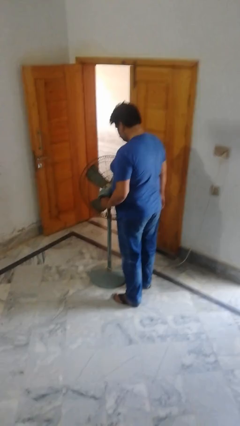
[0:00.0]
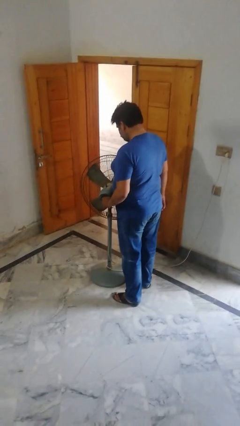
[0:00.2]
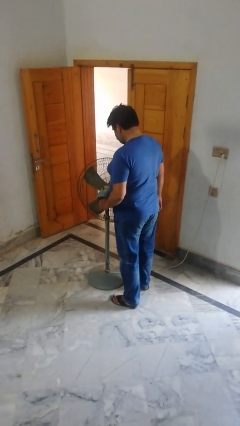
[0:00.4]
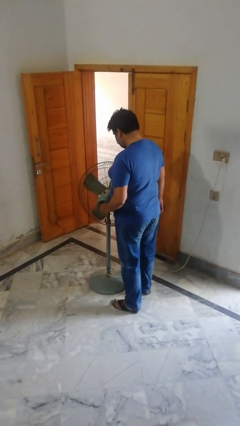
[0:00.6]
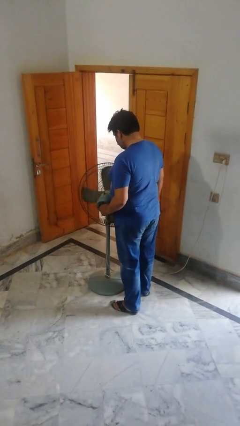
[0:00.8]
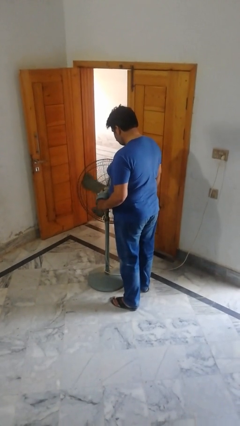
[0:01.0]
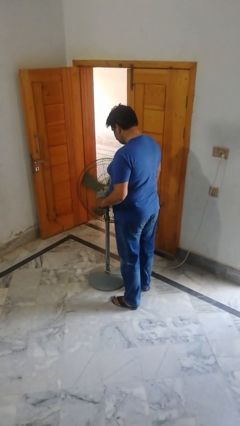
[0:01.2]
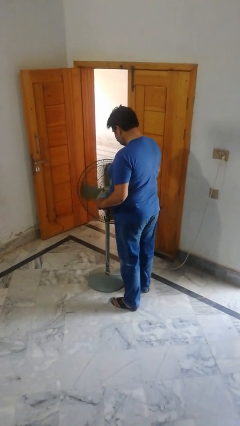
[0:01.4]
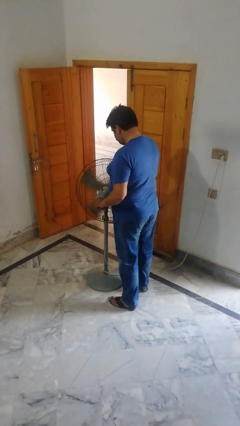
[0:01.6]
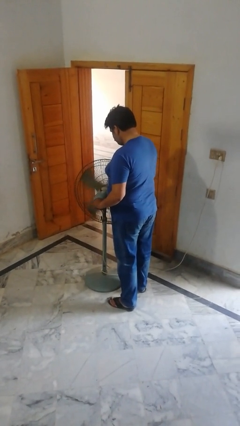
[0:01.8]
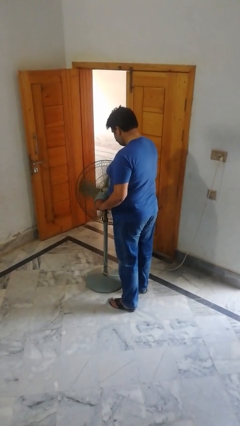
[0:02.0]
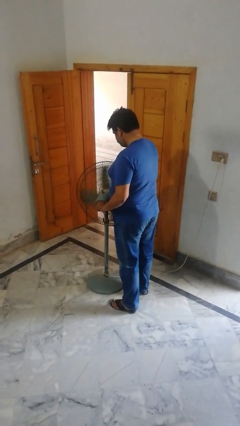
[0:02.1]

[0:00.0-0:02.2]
person turns on fan

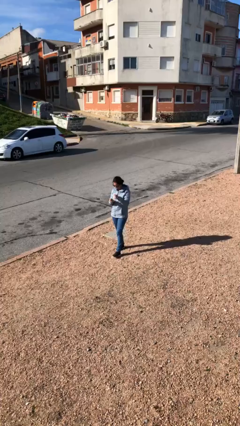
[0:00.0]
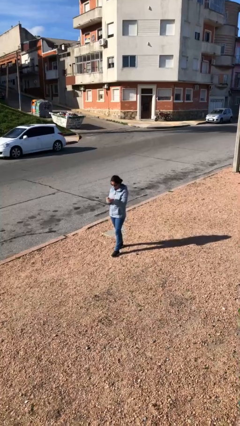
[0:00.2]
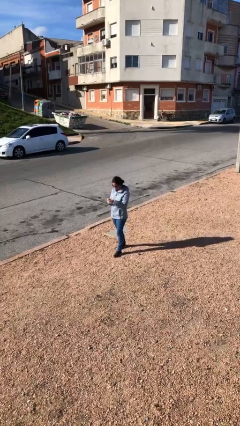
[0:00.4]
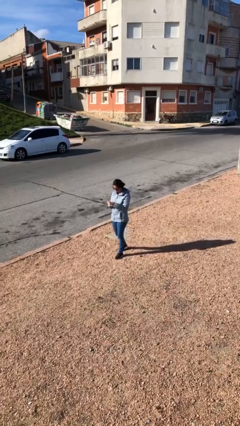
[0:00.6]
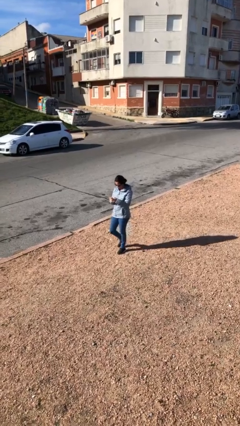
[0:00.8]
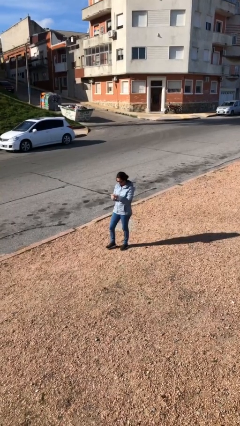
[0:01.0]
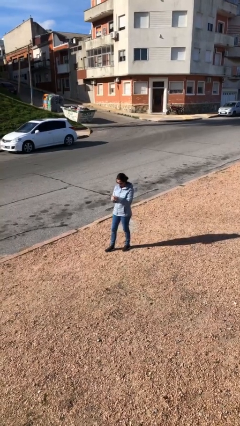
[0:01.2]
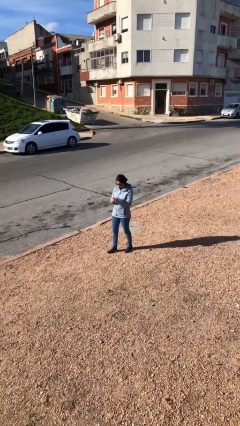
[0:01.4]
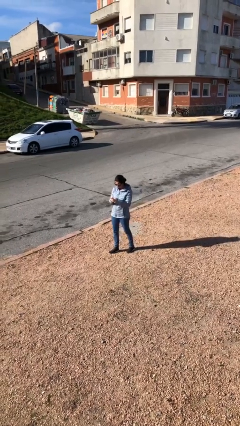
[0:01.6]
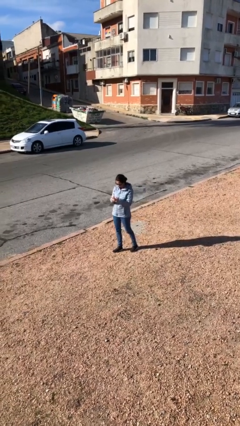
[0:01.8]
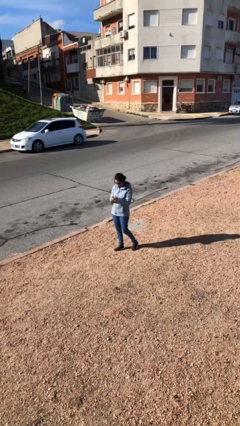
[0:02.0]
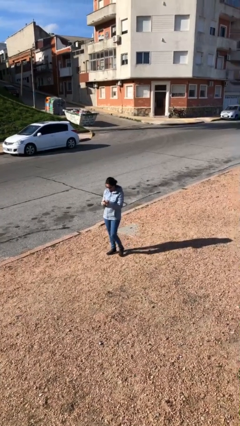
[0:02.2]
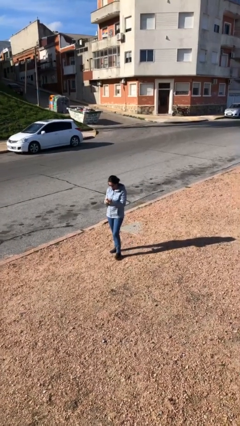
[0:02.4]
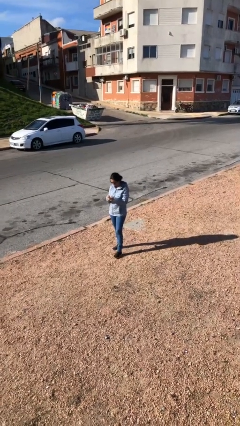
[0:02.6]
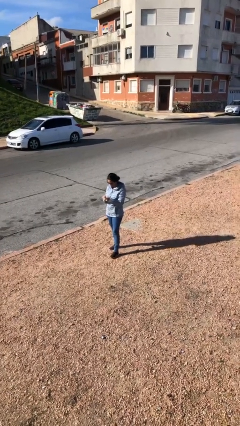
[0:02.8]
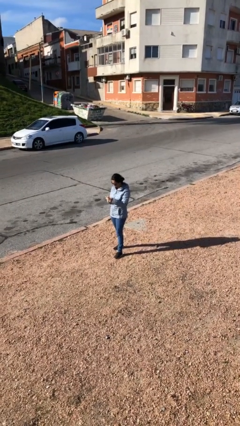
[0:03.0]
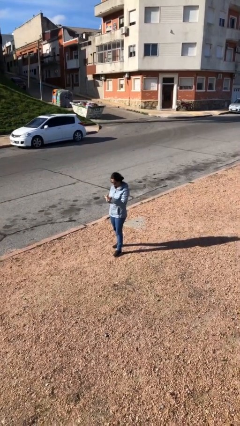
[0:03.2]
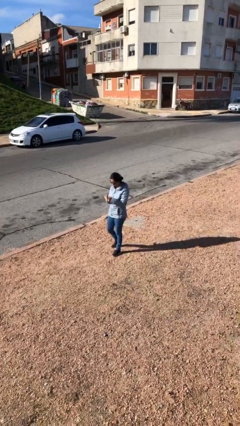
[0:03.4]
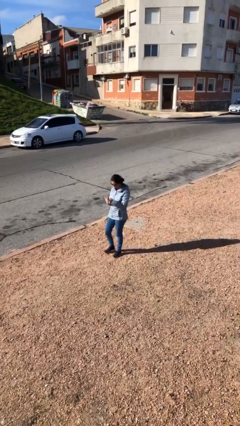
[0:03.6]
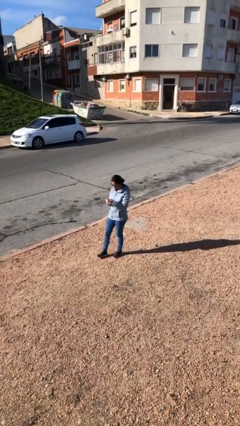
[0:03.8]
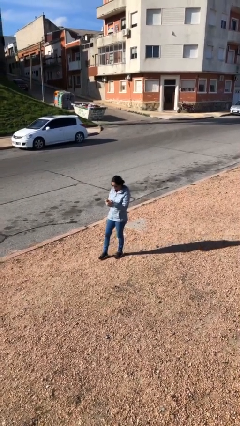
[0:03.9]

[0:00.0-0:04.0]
person texts on phone

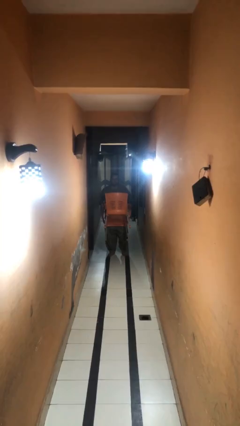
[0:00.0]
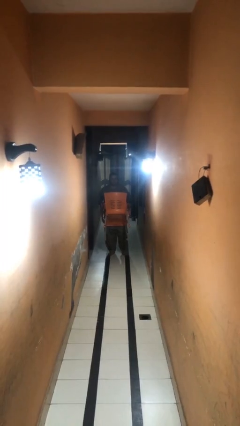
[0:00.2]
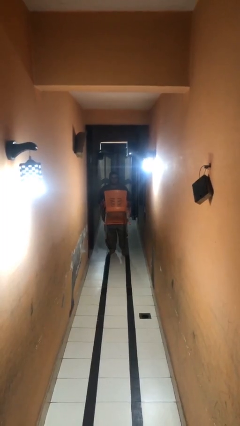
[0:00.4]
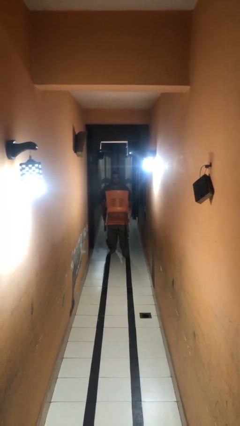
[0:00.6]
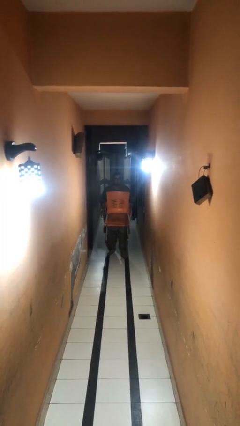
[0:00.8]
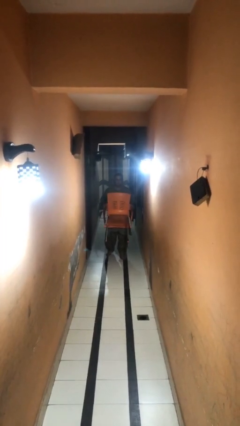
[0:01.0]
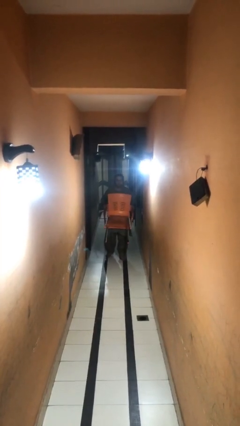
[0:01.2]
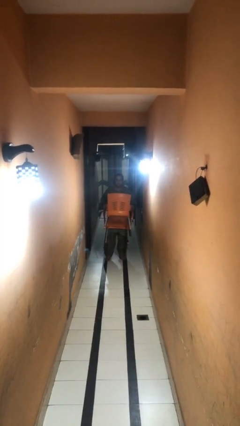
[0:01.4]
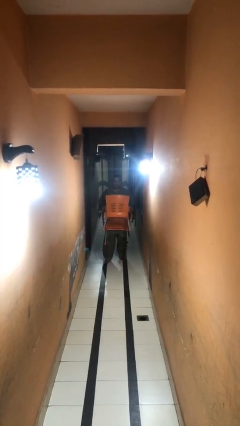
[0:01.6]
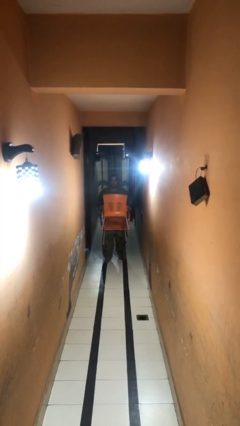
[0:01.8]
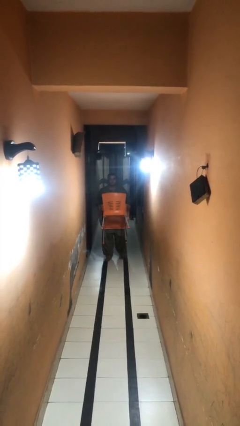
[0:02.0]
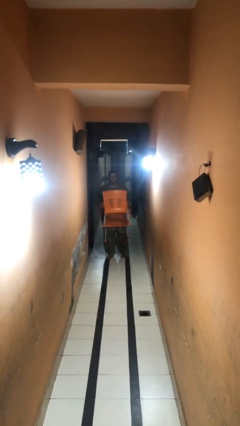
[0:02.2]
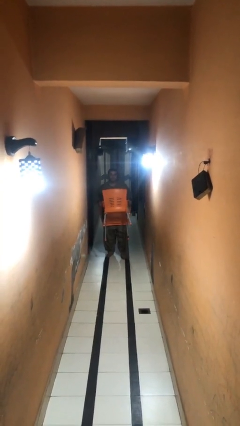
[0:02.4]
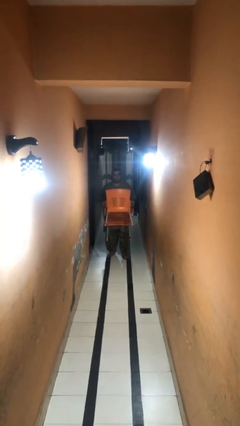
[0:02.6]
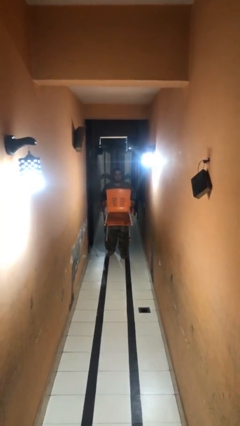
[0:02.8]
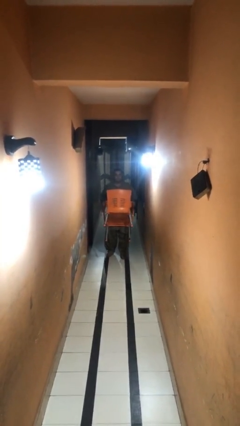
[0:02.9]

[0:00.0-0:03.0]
person carries furniture

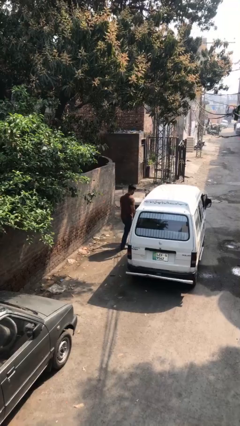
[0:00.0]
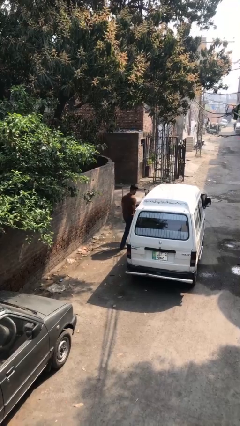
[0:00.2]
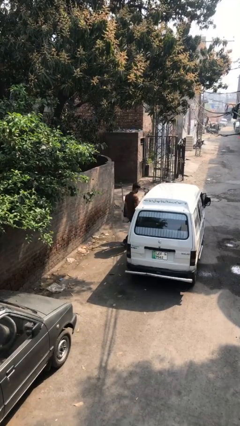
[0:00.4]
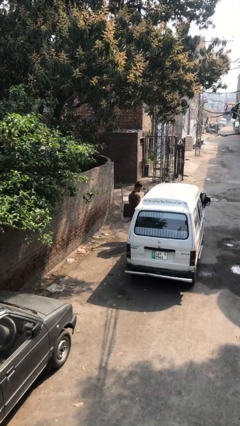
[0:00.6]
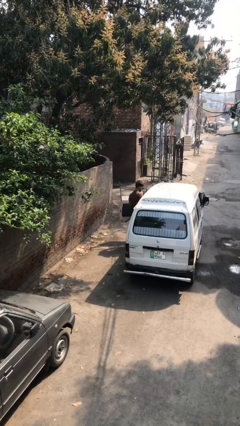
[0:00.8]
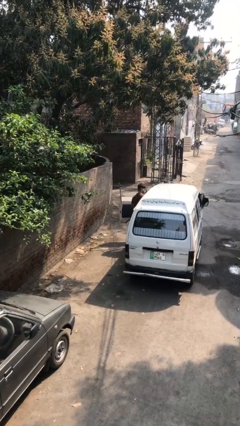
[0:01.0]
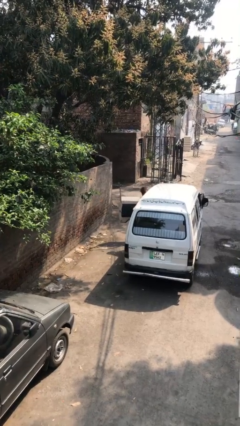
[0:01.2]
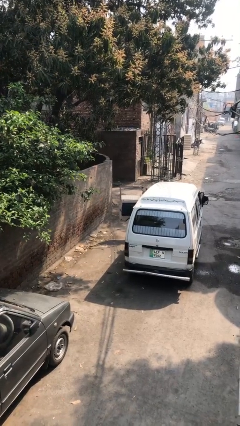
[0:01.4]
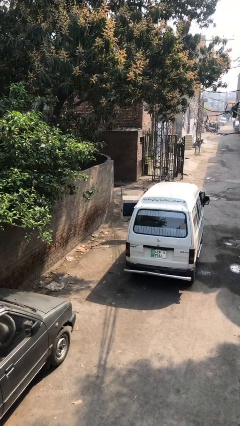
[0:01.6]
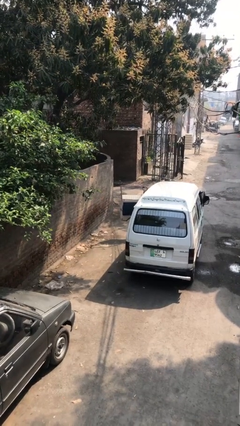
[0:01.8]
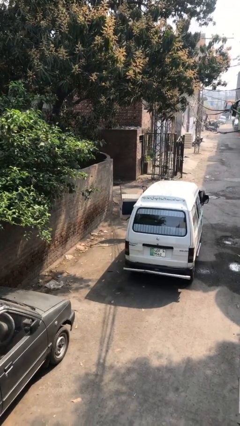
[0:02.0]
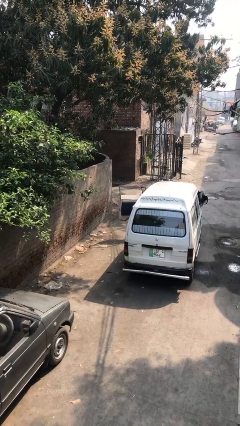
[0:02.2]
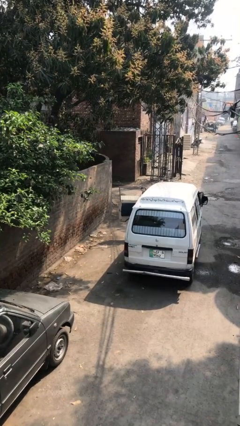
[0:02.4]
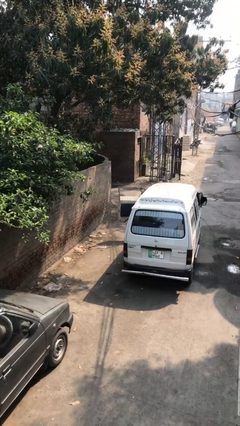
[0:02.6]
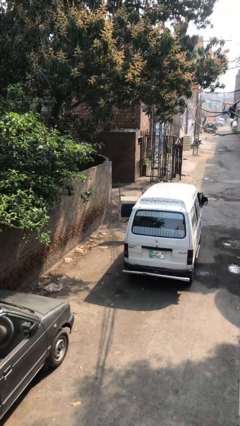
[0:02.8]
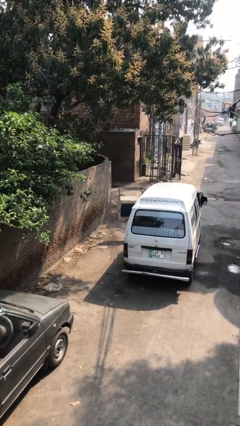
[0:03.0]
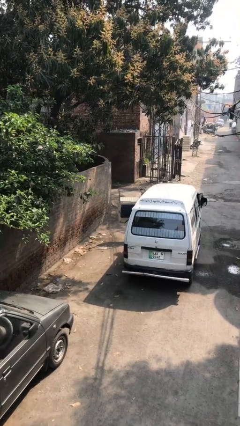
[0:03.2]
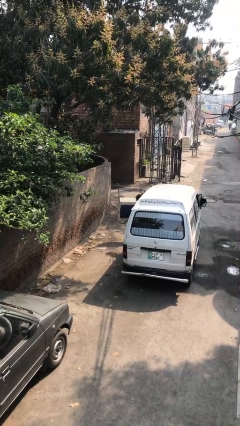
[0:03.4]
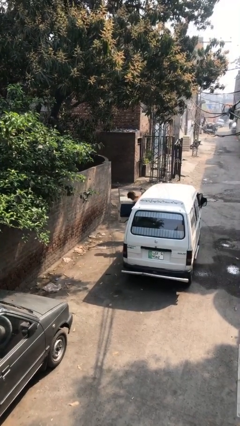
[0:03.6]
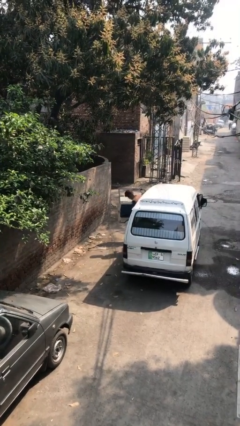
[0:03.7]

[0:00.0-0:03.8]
person enters car

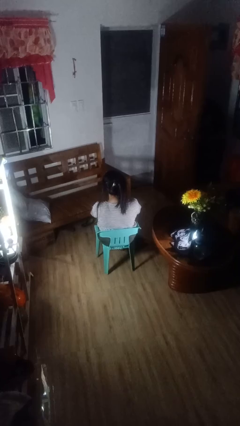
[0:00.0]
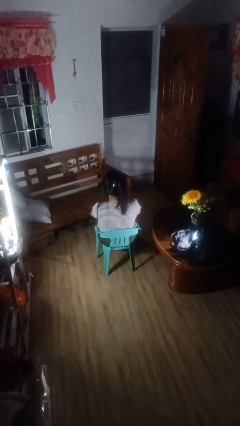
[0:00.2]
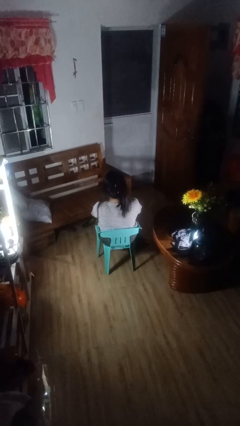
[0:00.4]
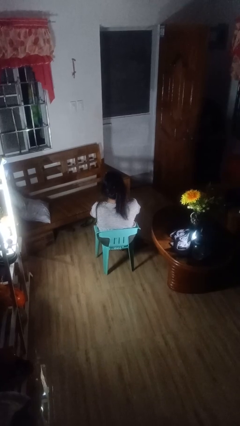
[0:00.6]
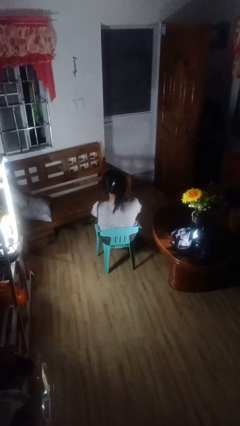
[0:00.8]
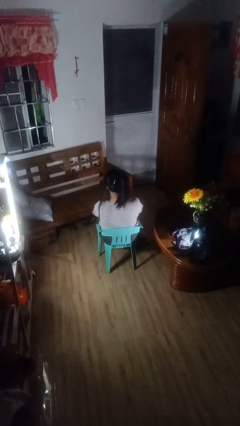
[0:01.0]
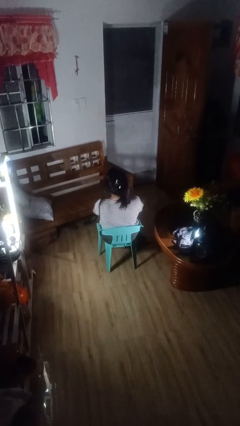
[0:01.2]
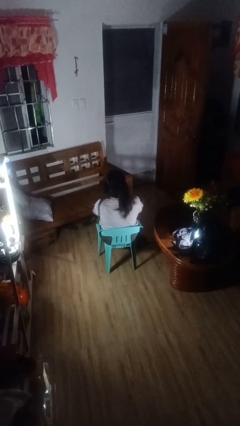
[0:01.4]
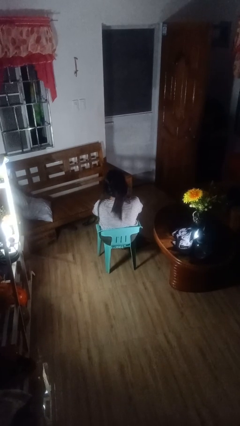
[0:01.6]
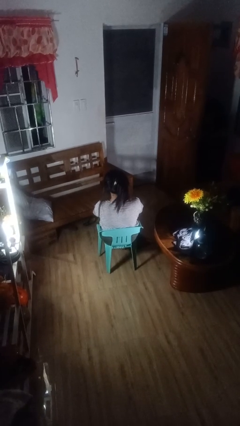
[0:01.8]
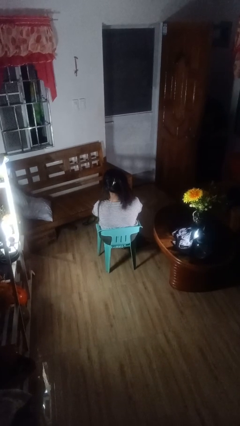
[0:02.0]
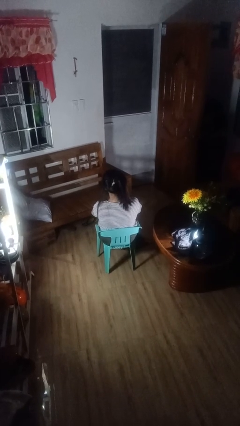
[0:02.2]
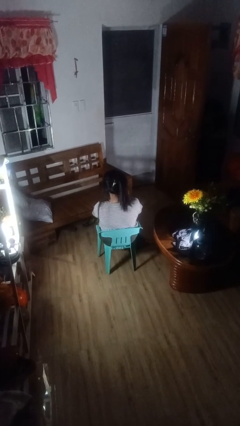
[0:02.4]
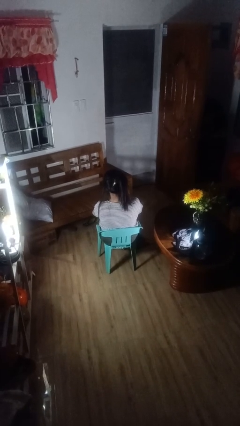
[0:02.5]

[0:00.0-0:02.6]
person nods head

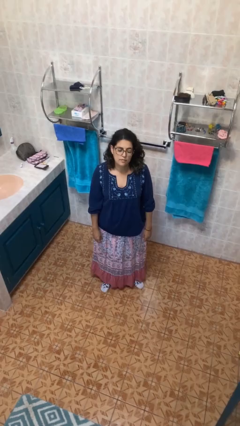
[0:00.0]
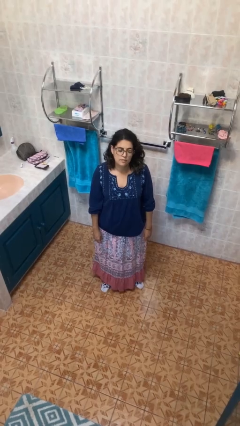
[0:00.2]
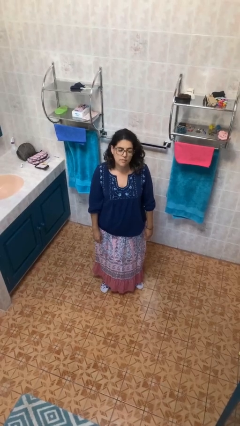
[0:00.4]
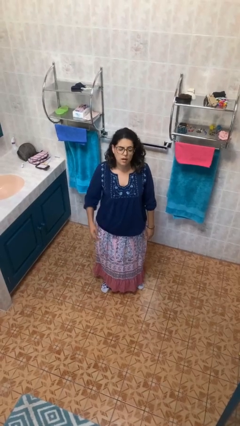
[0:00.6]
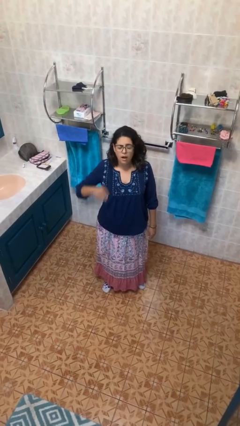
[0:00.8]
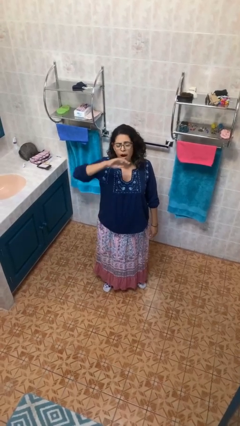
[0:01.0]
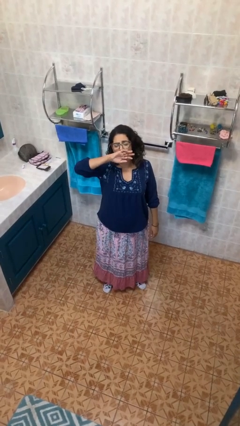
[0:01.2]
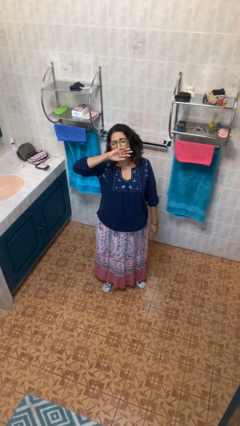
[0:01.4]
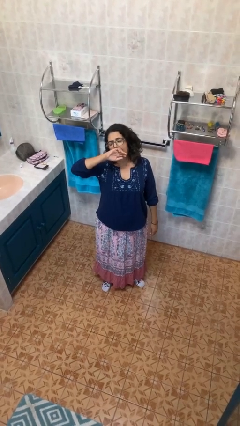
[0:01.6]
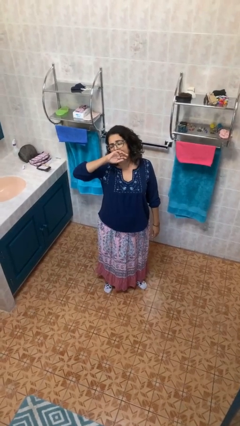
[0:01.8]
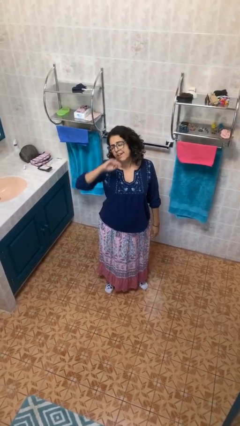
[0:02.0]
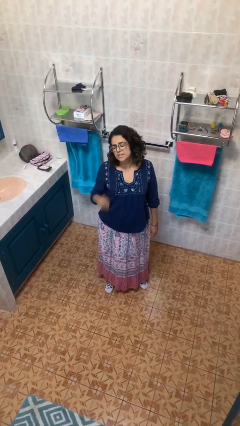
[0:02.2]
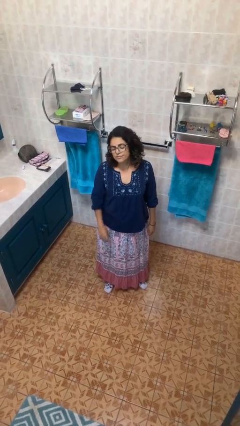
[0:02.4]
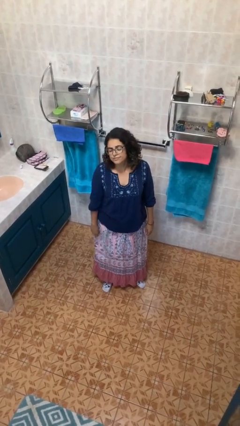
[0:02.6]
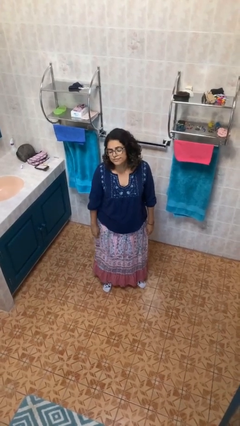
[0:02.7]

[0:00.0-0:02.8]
person yawns
